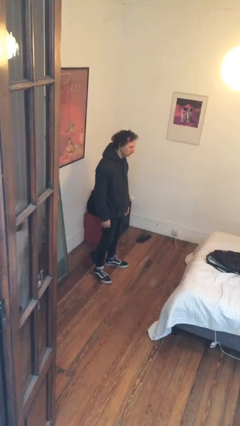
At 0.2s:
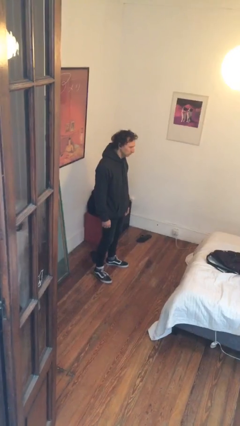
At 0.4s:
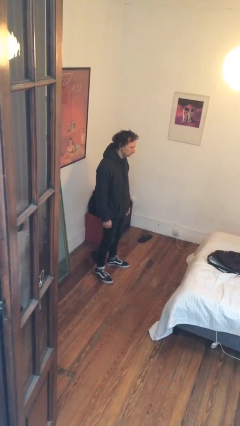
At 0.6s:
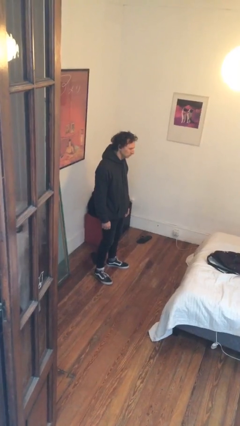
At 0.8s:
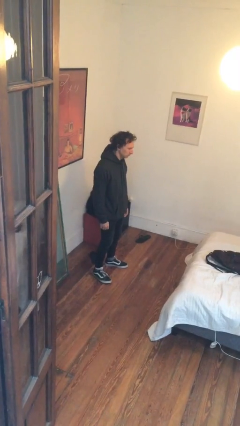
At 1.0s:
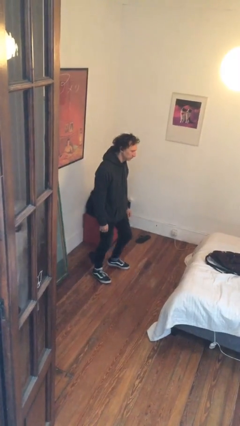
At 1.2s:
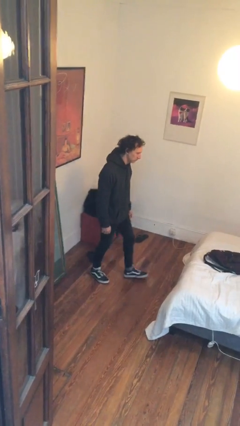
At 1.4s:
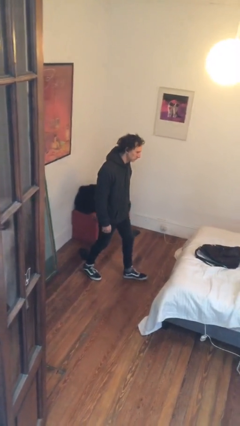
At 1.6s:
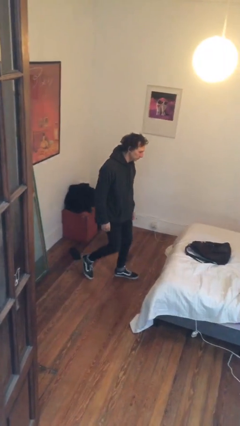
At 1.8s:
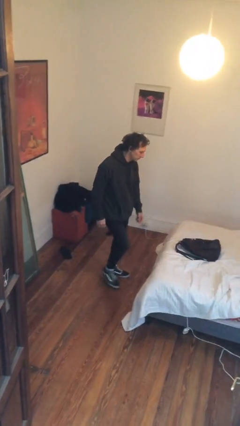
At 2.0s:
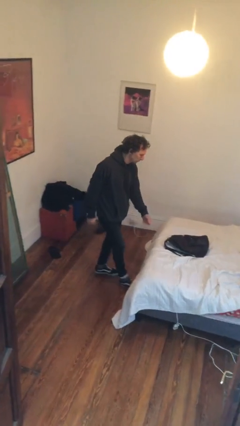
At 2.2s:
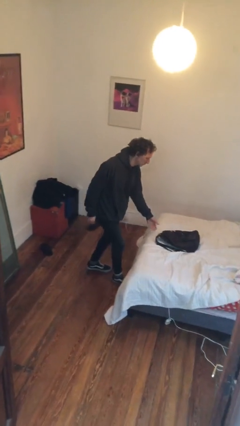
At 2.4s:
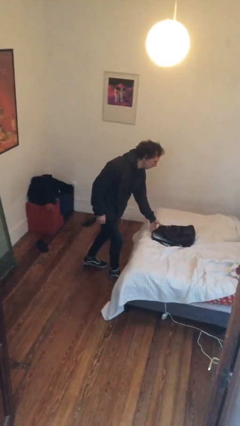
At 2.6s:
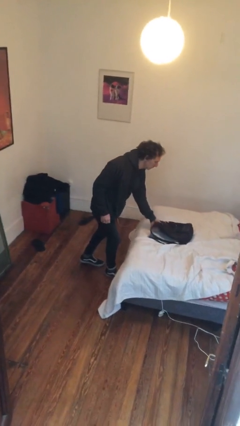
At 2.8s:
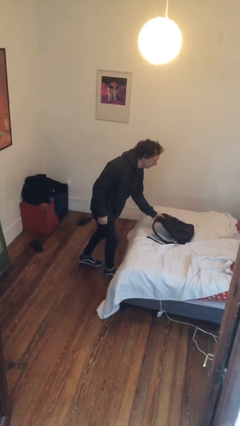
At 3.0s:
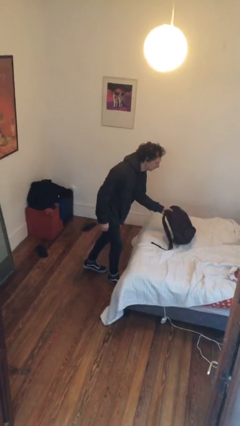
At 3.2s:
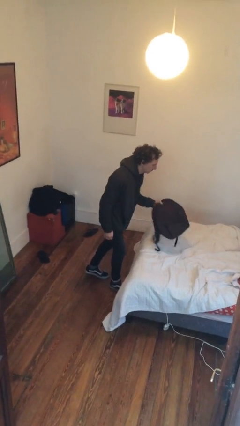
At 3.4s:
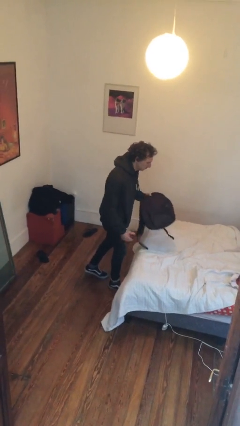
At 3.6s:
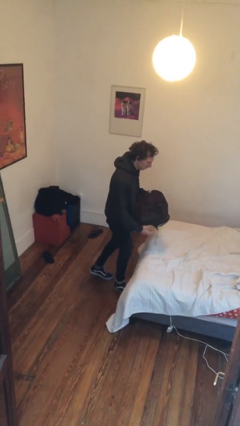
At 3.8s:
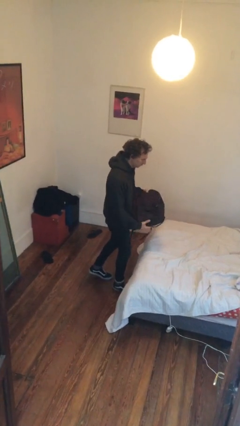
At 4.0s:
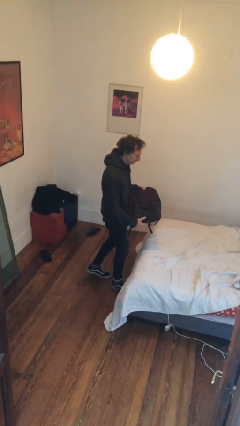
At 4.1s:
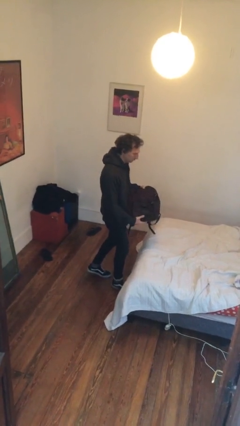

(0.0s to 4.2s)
person picks up object from bed

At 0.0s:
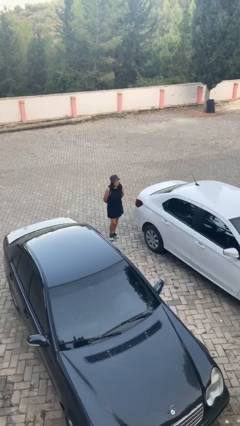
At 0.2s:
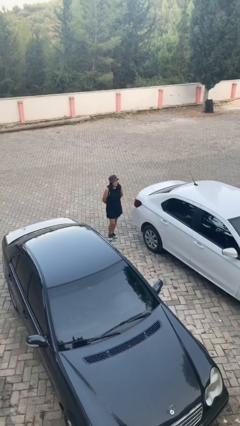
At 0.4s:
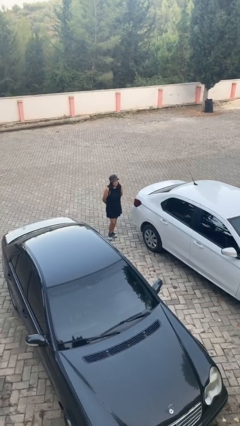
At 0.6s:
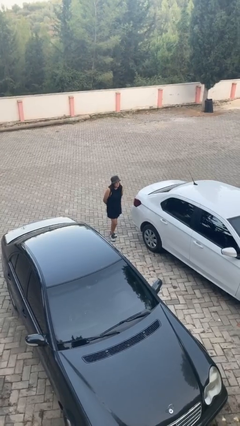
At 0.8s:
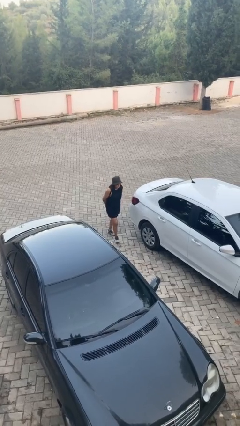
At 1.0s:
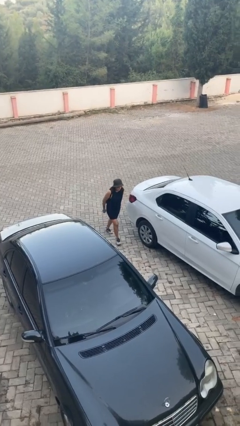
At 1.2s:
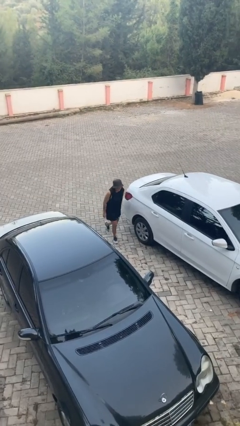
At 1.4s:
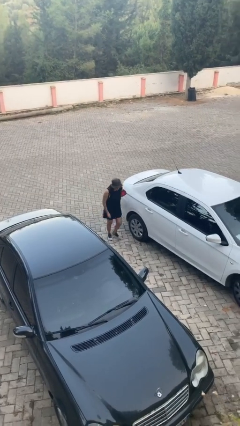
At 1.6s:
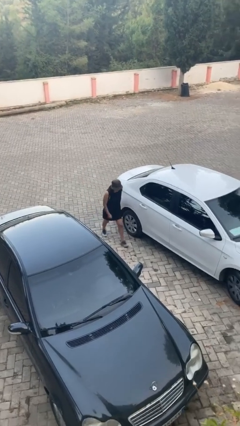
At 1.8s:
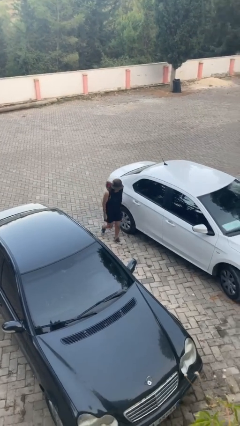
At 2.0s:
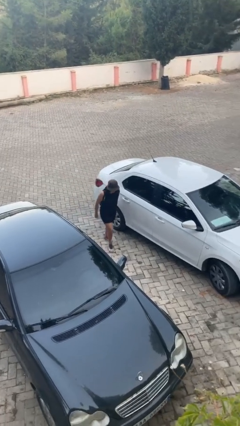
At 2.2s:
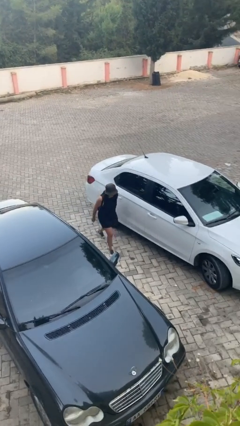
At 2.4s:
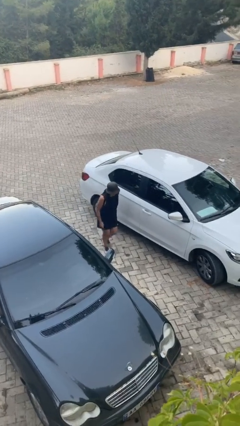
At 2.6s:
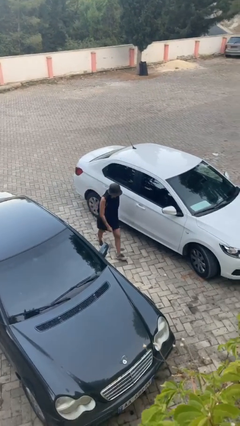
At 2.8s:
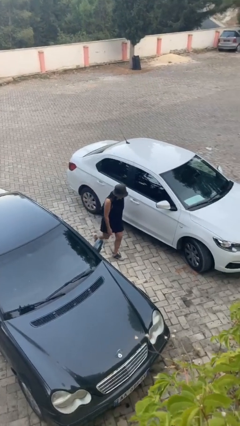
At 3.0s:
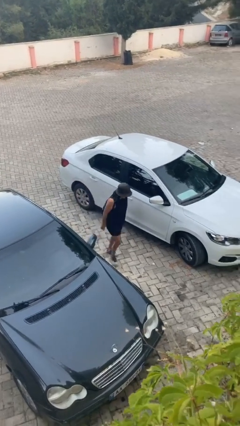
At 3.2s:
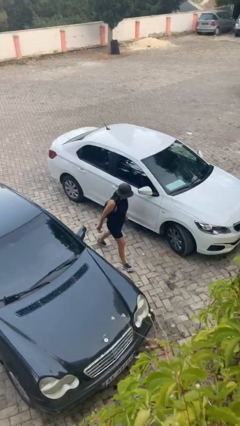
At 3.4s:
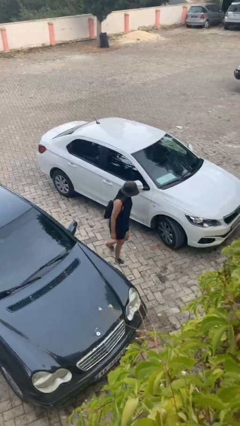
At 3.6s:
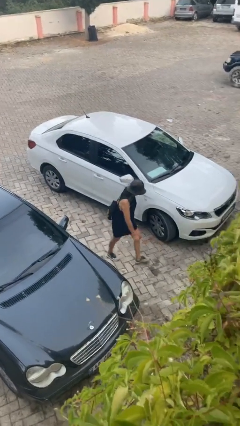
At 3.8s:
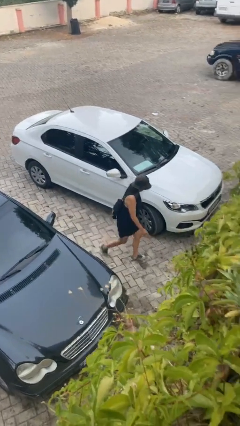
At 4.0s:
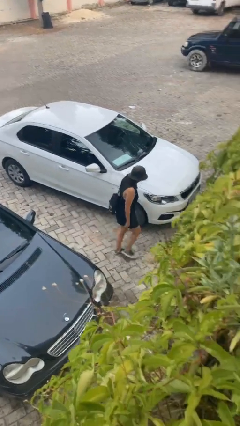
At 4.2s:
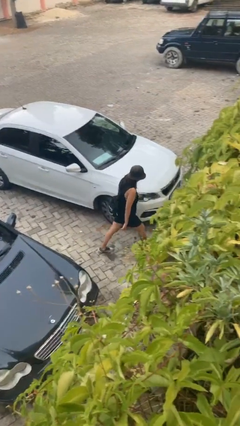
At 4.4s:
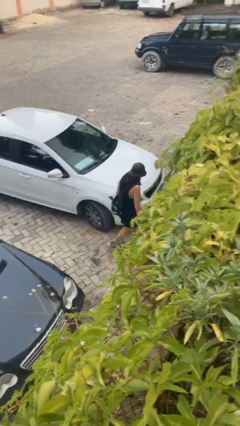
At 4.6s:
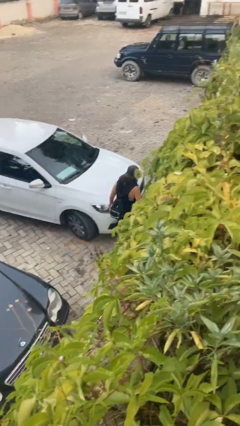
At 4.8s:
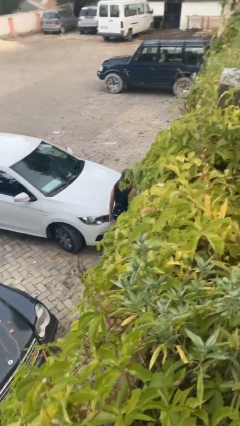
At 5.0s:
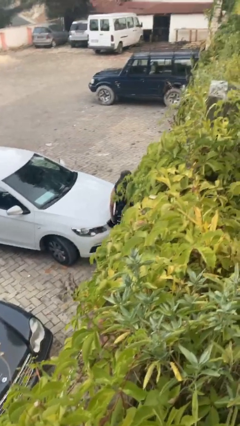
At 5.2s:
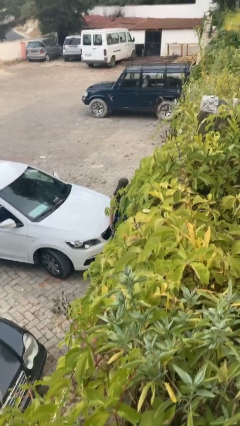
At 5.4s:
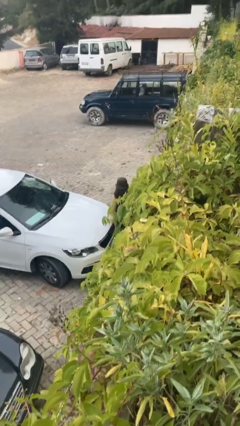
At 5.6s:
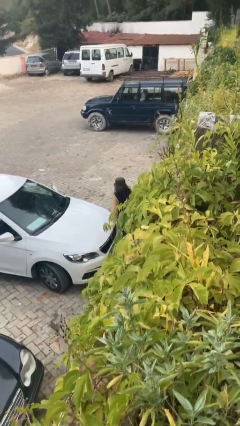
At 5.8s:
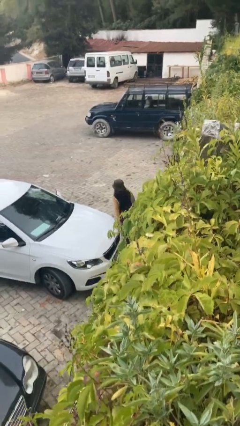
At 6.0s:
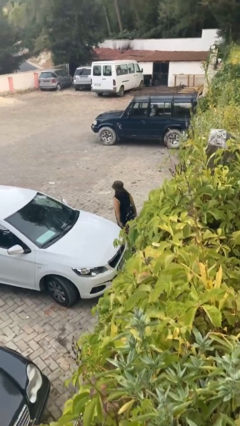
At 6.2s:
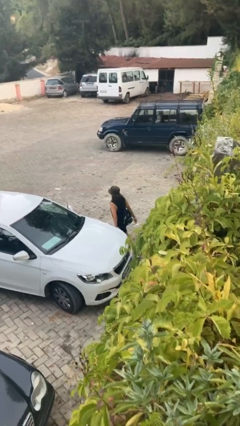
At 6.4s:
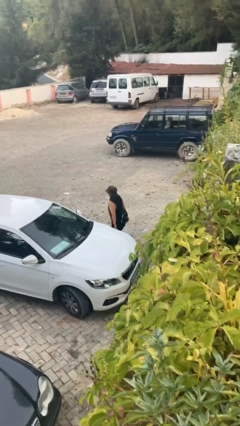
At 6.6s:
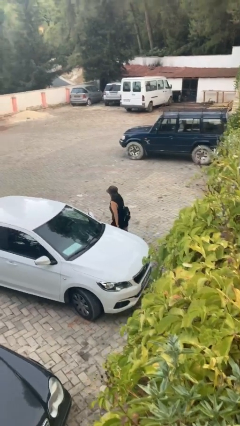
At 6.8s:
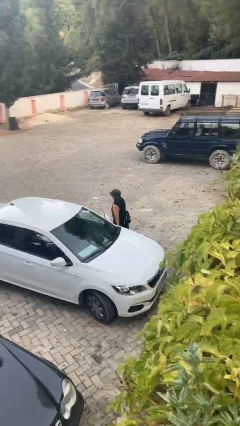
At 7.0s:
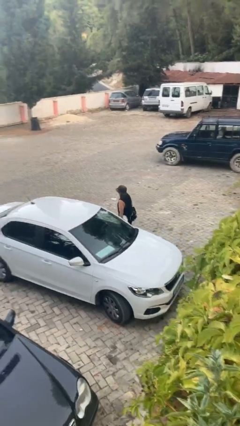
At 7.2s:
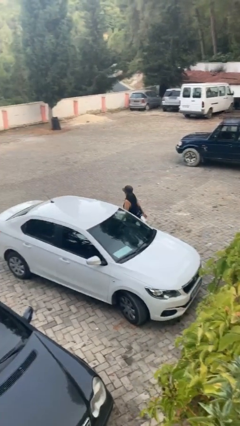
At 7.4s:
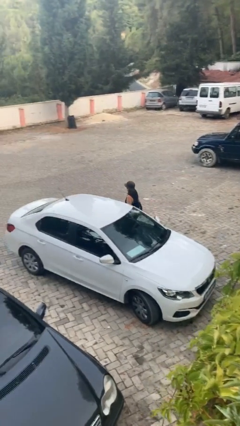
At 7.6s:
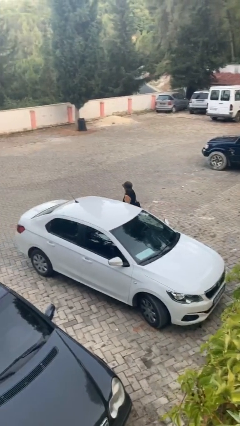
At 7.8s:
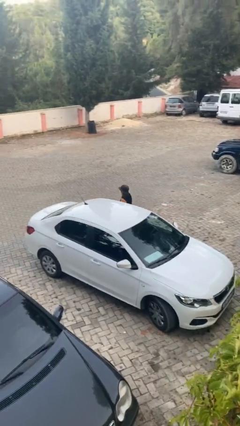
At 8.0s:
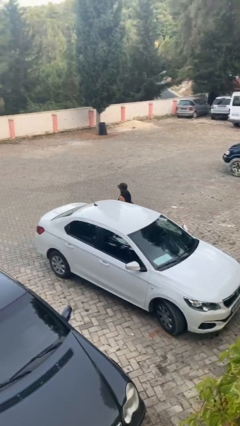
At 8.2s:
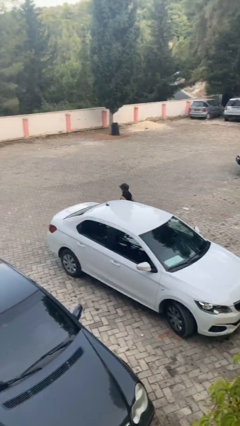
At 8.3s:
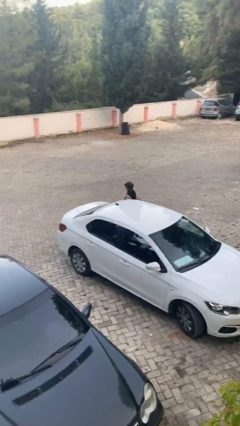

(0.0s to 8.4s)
person walks around car

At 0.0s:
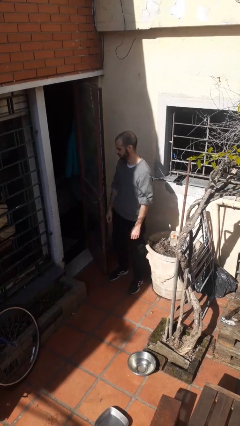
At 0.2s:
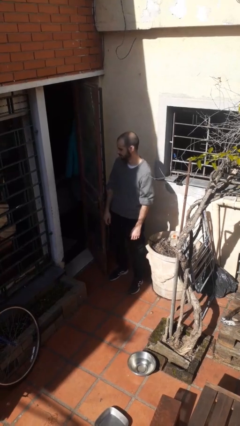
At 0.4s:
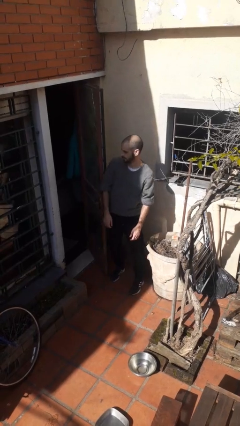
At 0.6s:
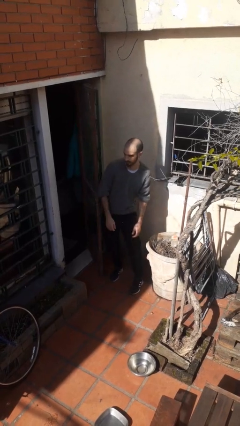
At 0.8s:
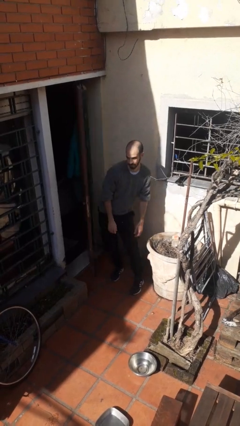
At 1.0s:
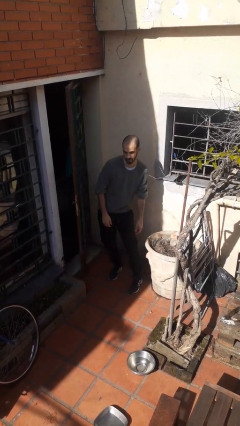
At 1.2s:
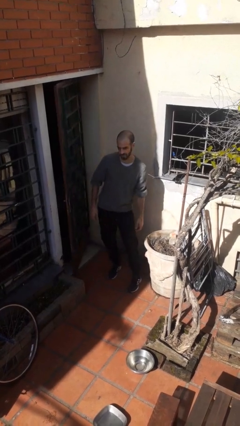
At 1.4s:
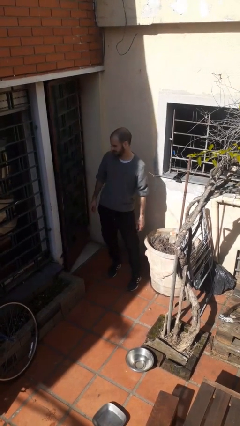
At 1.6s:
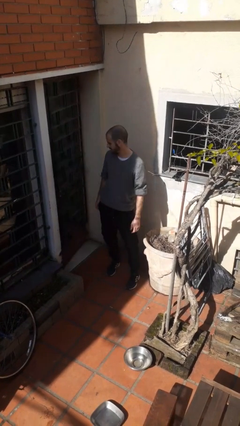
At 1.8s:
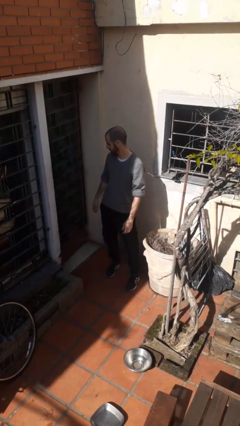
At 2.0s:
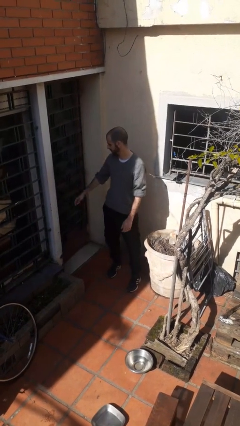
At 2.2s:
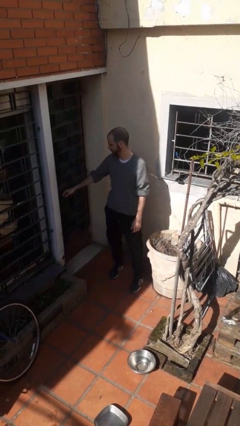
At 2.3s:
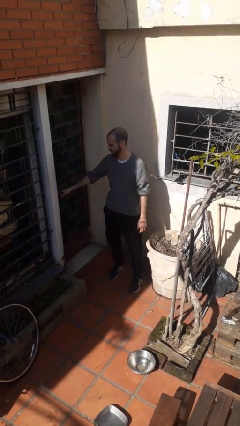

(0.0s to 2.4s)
person closes door with hip

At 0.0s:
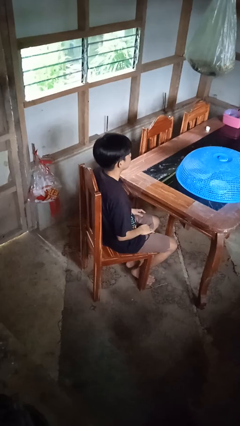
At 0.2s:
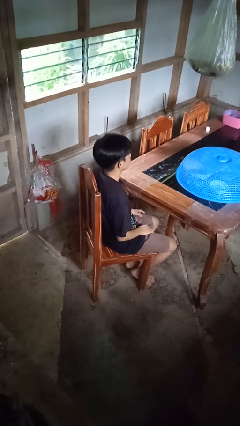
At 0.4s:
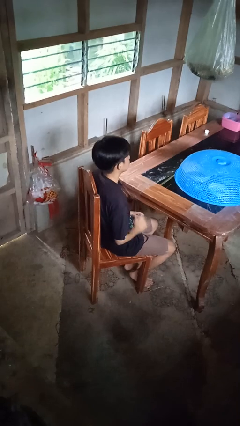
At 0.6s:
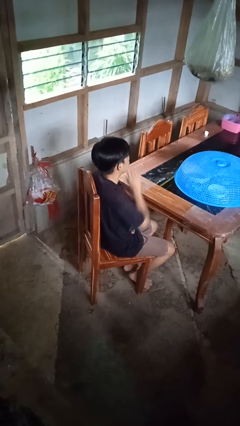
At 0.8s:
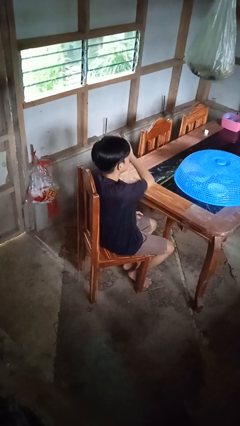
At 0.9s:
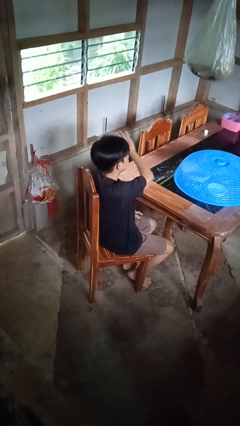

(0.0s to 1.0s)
person gestures swipe left

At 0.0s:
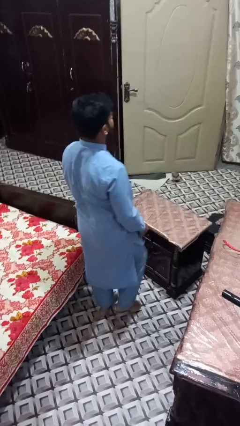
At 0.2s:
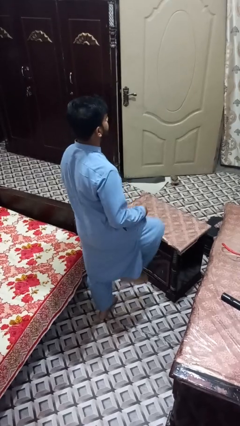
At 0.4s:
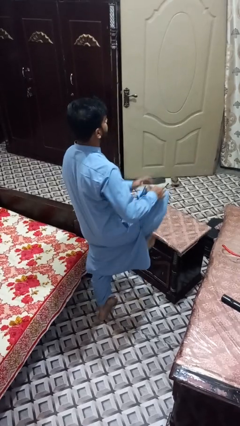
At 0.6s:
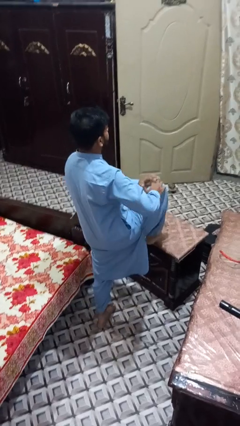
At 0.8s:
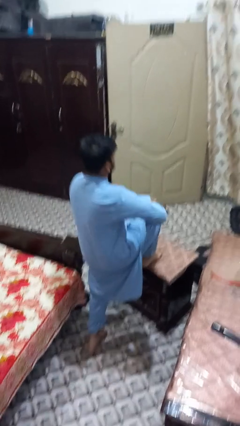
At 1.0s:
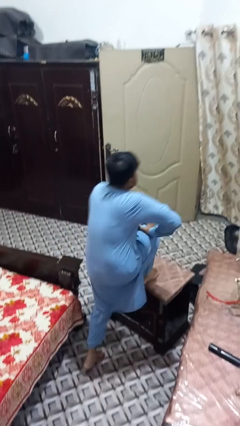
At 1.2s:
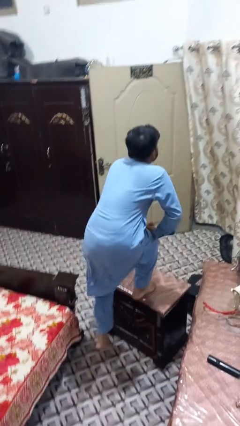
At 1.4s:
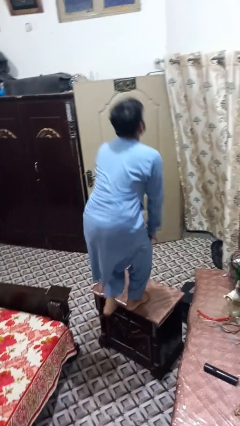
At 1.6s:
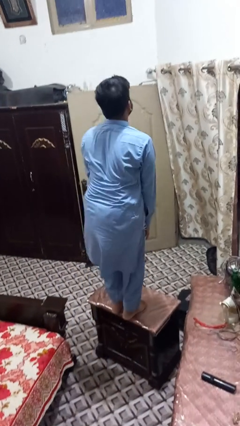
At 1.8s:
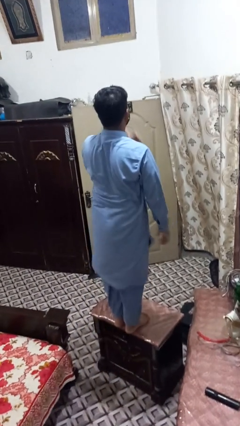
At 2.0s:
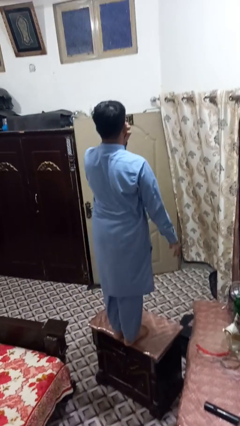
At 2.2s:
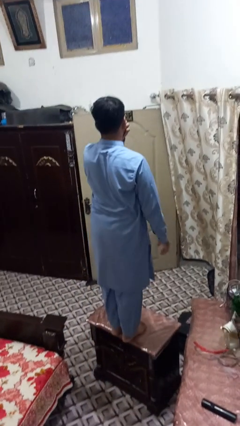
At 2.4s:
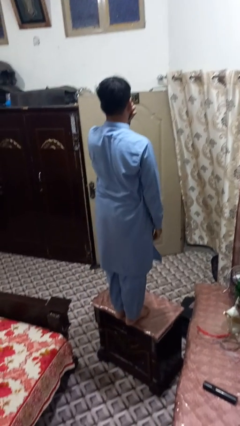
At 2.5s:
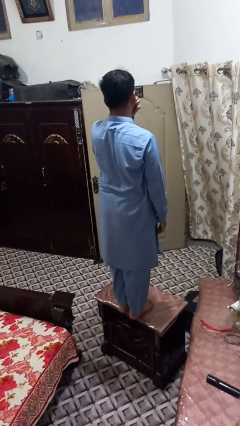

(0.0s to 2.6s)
person climbs on table
